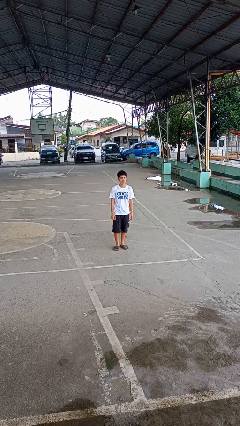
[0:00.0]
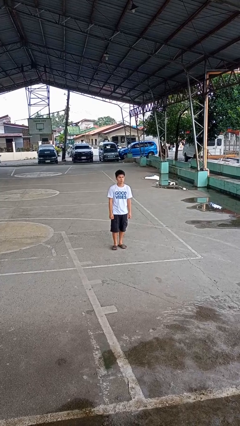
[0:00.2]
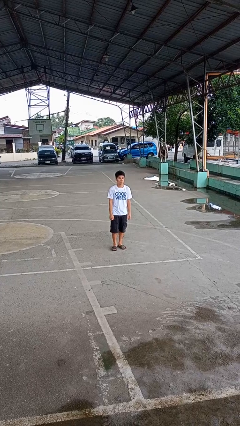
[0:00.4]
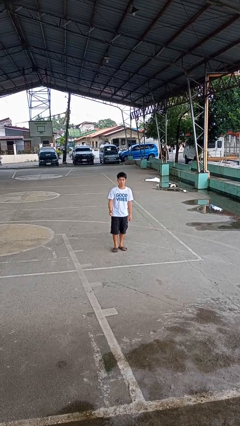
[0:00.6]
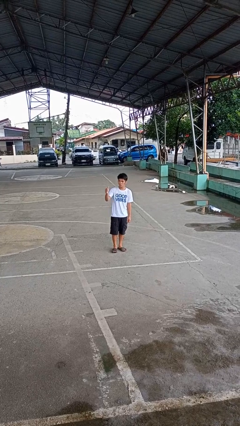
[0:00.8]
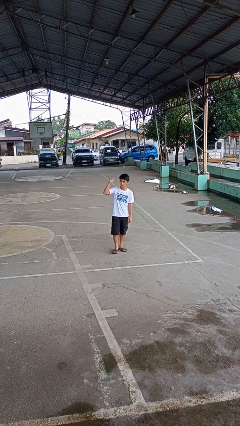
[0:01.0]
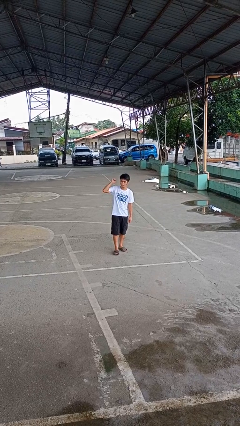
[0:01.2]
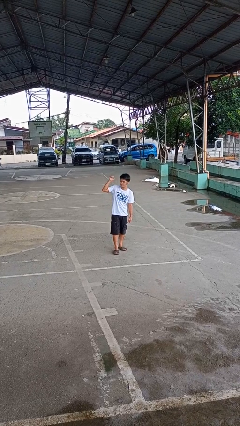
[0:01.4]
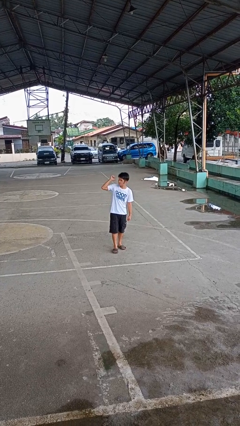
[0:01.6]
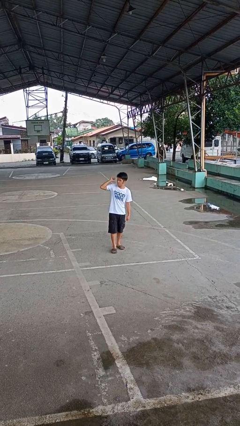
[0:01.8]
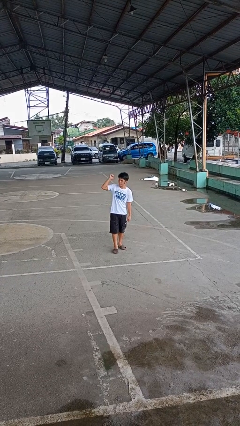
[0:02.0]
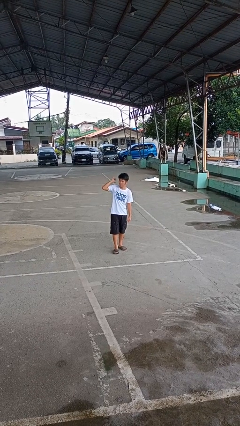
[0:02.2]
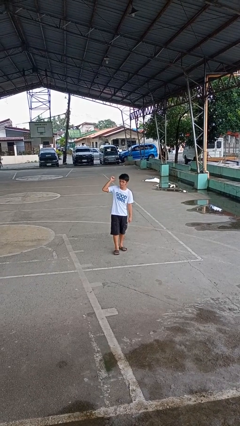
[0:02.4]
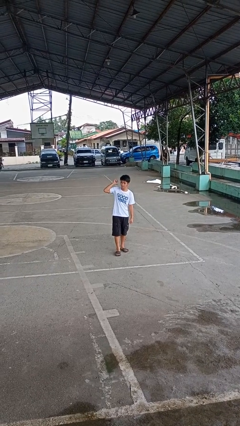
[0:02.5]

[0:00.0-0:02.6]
person gestures behind me

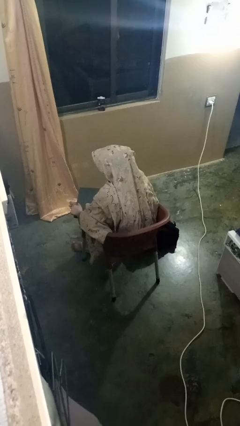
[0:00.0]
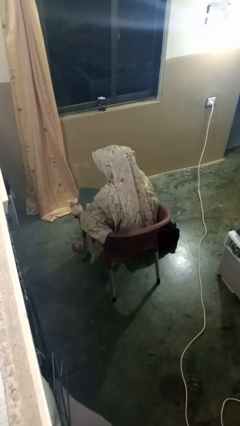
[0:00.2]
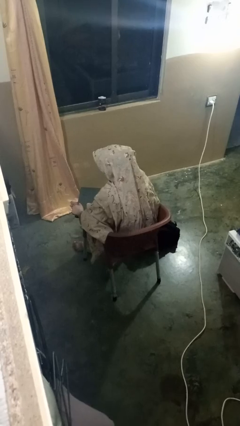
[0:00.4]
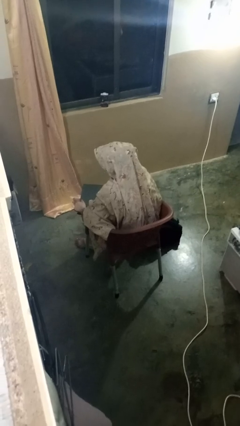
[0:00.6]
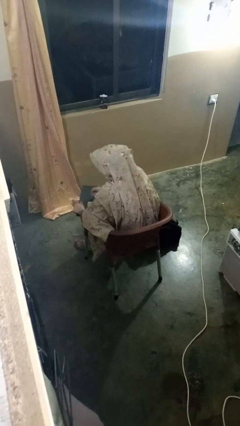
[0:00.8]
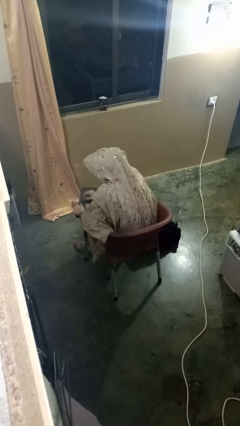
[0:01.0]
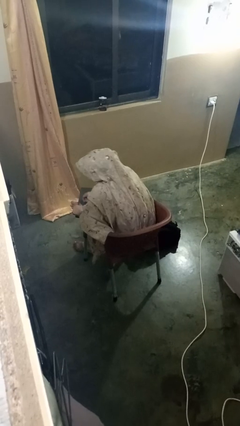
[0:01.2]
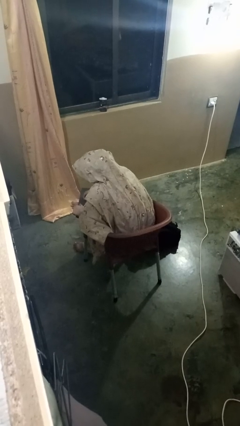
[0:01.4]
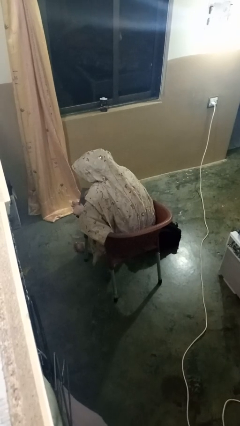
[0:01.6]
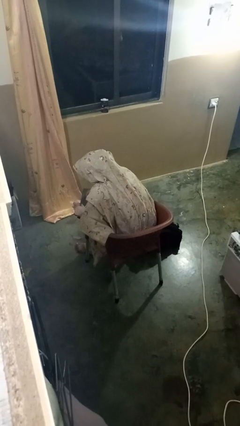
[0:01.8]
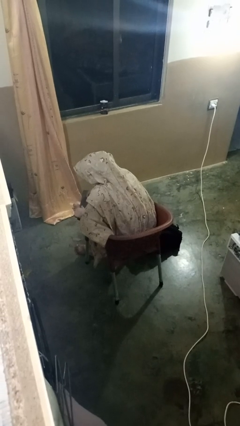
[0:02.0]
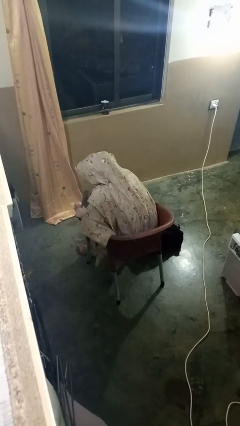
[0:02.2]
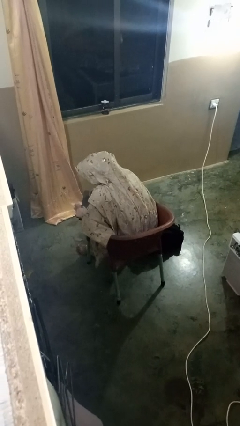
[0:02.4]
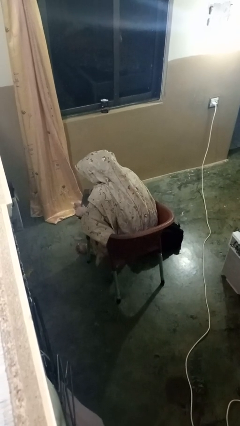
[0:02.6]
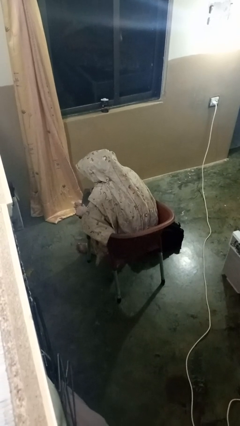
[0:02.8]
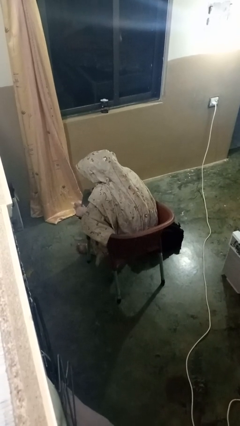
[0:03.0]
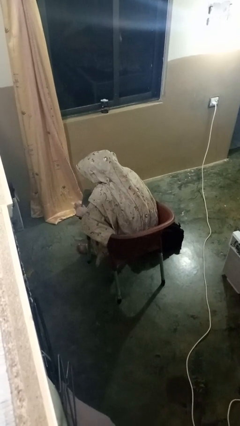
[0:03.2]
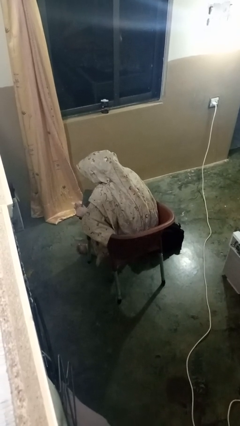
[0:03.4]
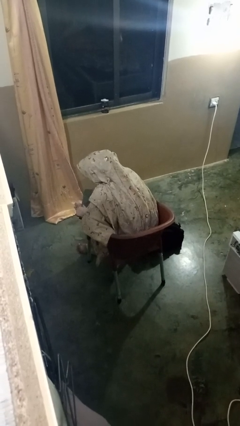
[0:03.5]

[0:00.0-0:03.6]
person interacts with tablet

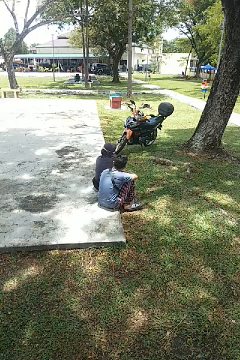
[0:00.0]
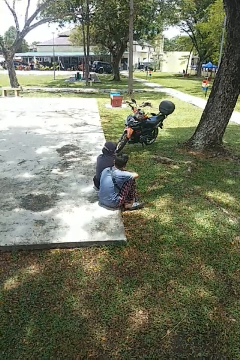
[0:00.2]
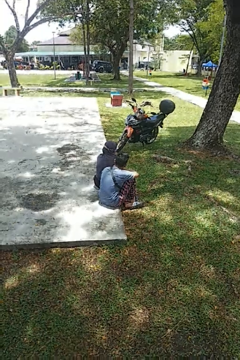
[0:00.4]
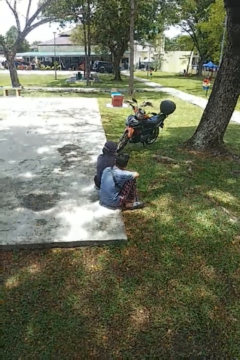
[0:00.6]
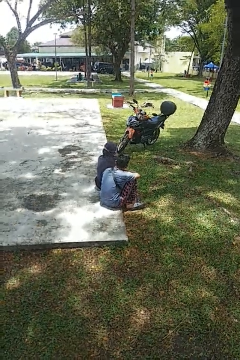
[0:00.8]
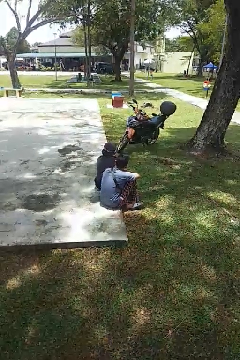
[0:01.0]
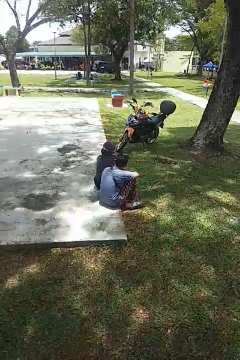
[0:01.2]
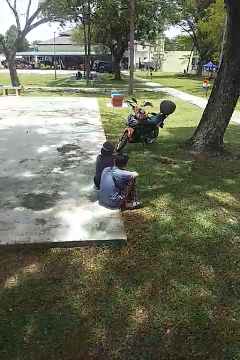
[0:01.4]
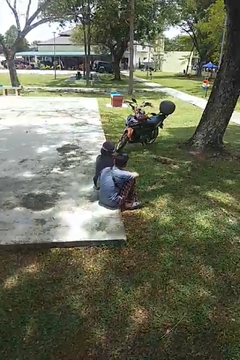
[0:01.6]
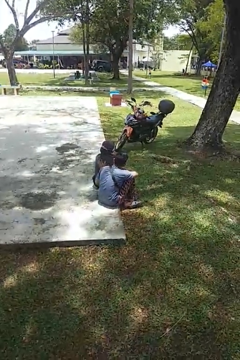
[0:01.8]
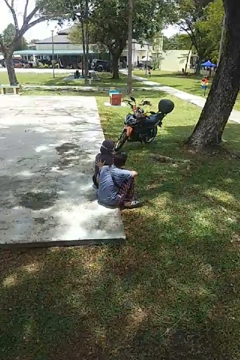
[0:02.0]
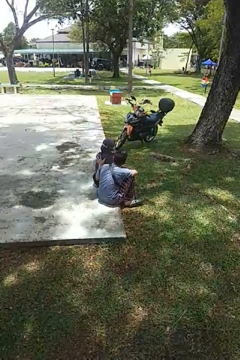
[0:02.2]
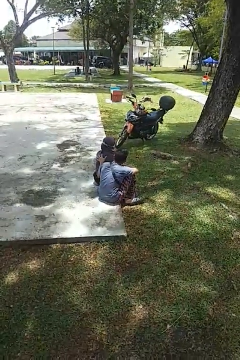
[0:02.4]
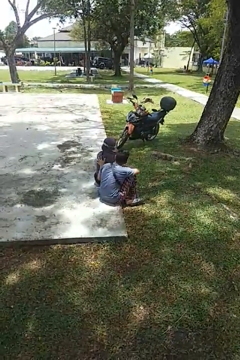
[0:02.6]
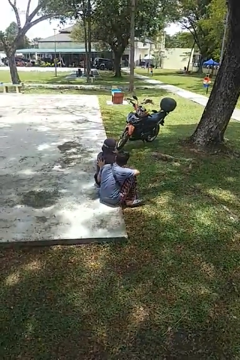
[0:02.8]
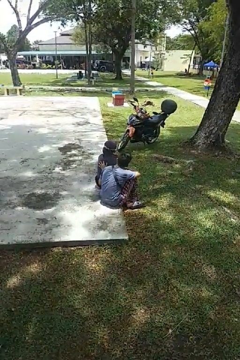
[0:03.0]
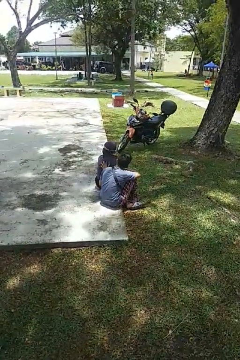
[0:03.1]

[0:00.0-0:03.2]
person touches back of person

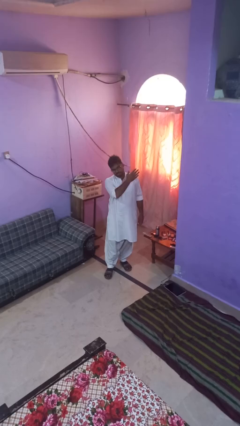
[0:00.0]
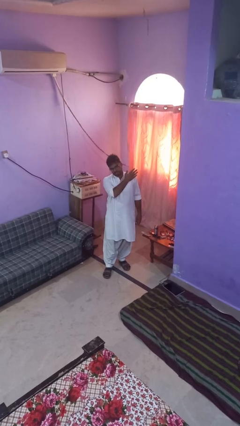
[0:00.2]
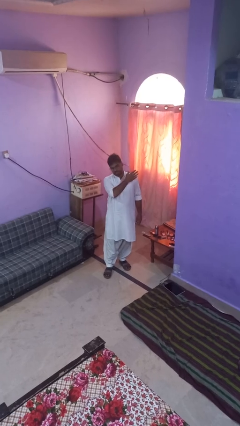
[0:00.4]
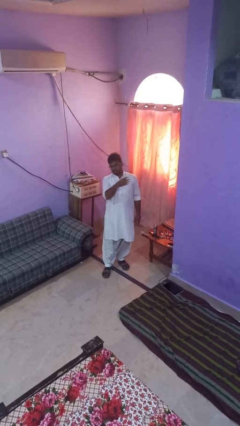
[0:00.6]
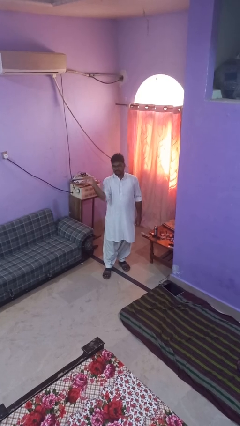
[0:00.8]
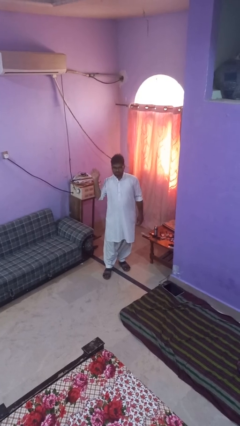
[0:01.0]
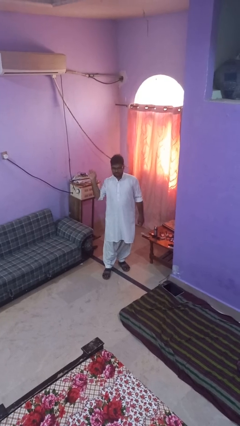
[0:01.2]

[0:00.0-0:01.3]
person gestures swipe right

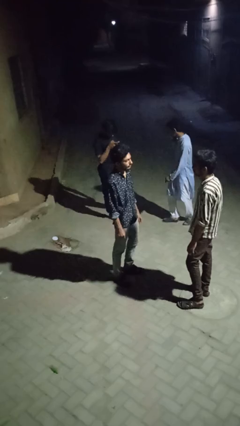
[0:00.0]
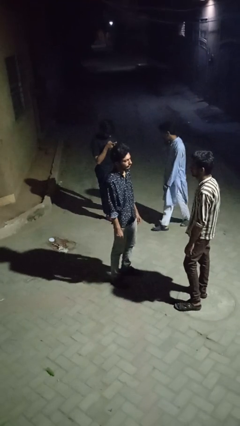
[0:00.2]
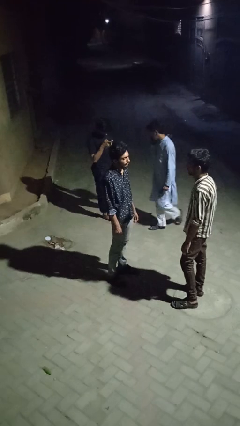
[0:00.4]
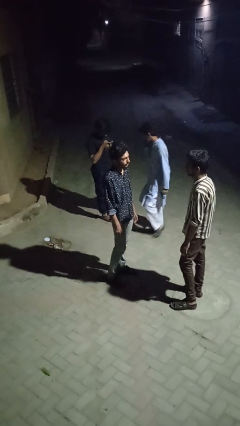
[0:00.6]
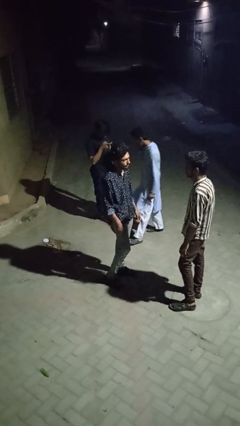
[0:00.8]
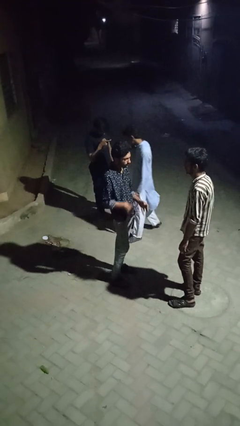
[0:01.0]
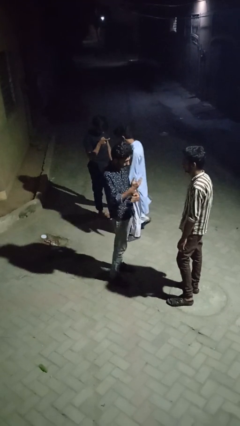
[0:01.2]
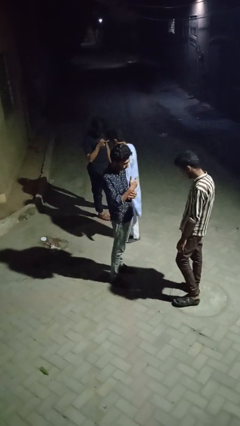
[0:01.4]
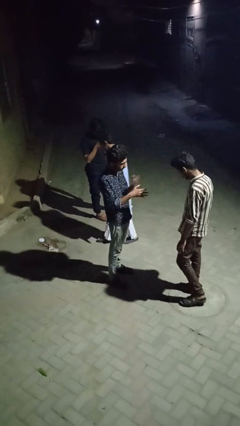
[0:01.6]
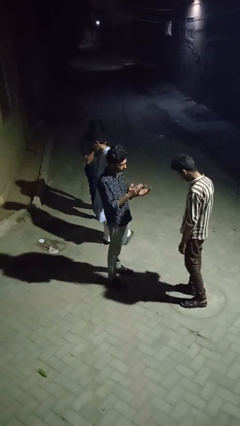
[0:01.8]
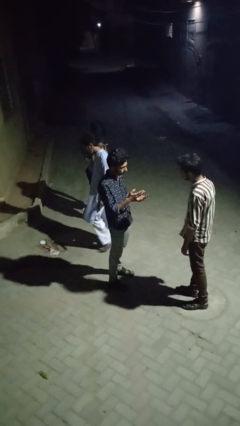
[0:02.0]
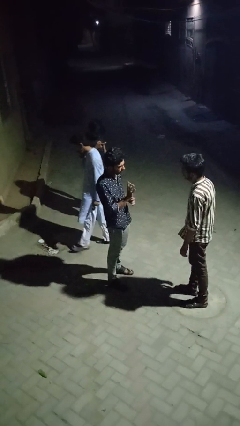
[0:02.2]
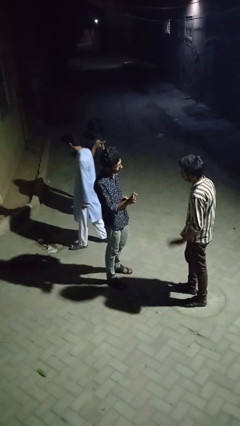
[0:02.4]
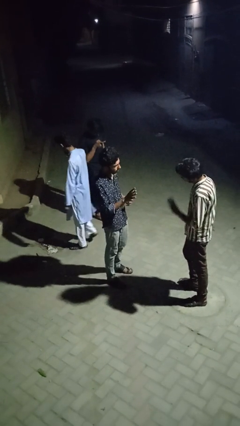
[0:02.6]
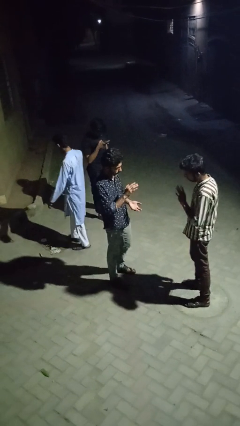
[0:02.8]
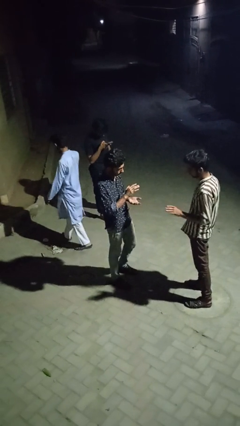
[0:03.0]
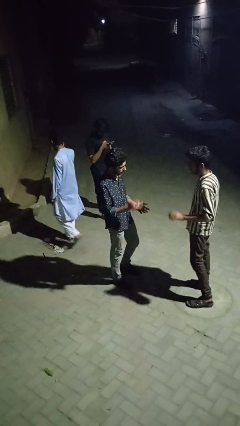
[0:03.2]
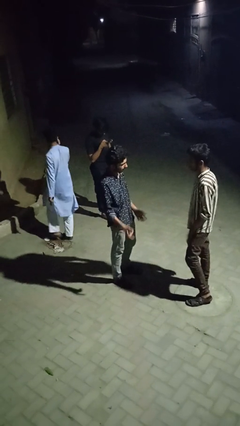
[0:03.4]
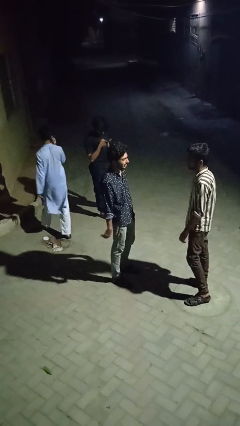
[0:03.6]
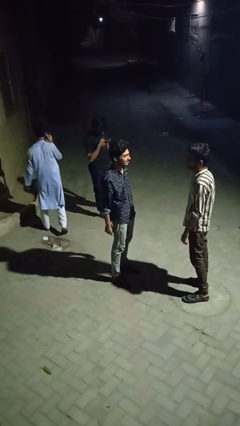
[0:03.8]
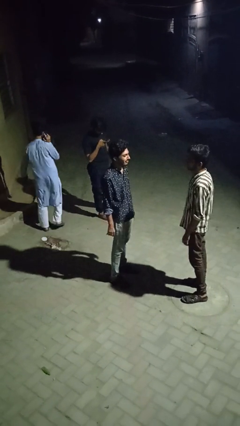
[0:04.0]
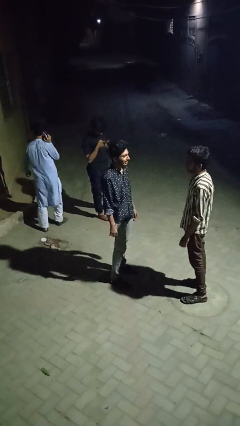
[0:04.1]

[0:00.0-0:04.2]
person talks to person

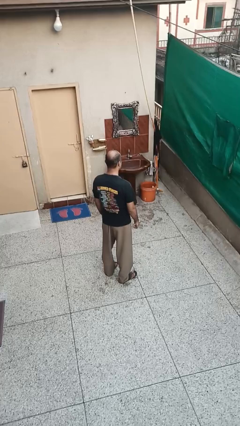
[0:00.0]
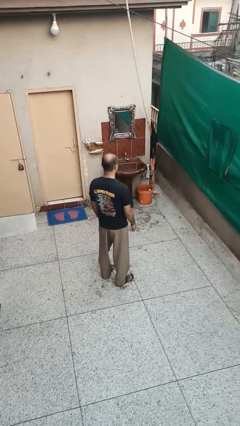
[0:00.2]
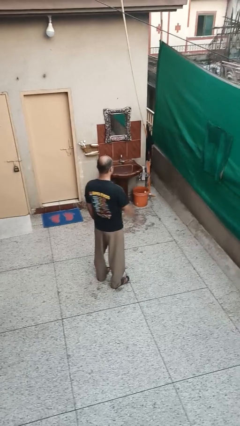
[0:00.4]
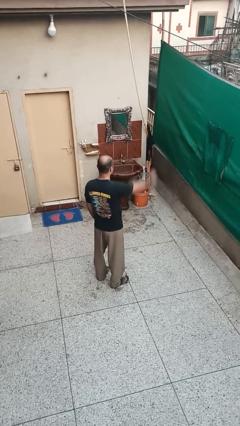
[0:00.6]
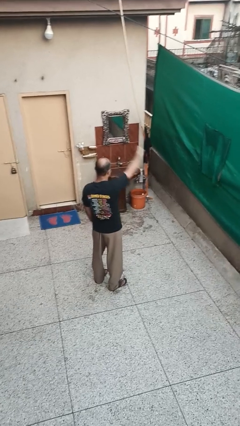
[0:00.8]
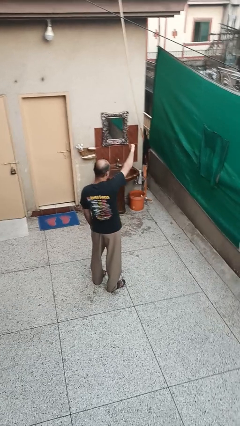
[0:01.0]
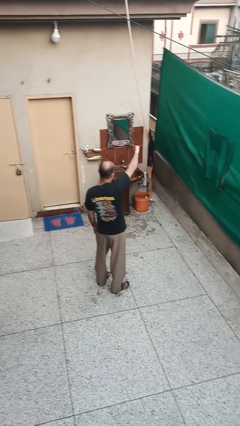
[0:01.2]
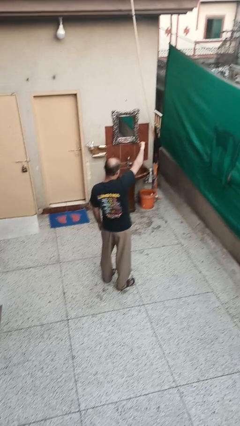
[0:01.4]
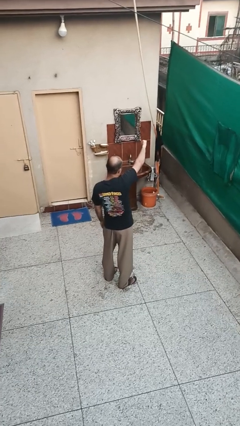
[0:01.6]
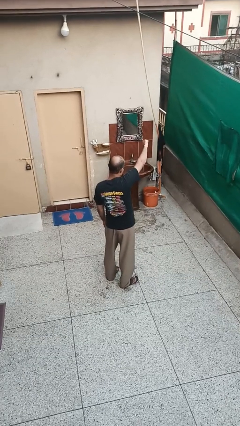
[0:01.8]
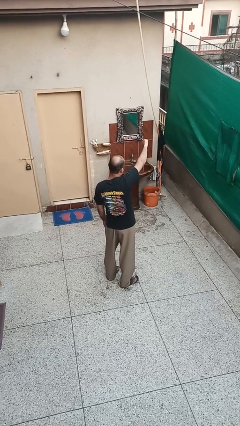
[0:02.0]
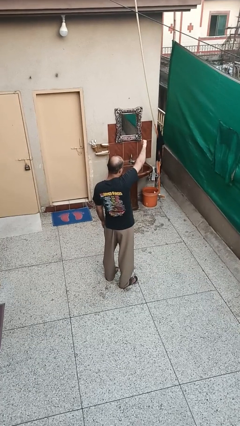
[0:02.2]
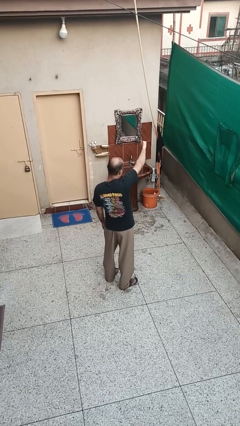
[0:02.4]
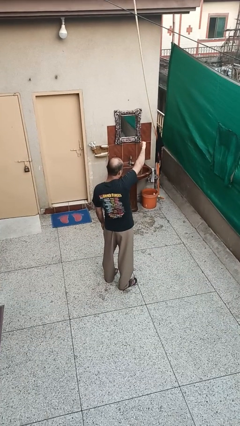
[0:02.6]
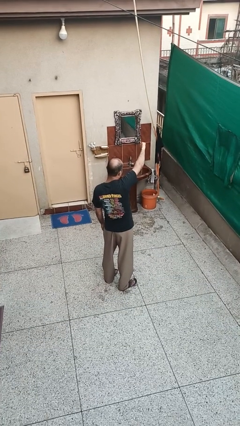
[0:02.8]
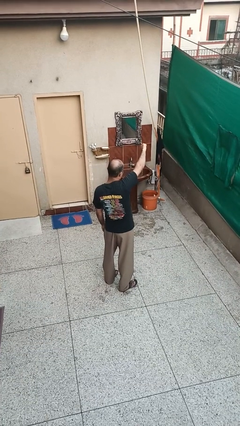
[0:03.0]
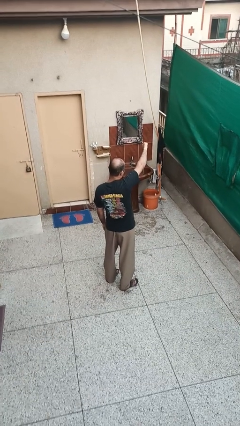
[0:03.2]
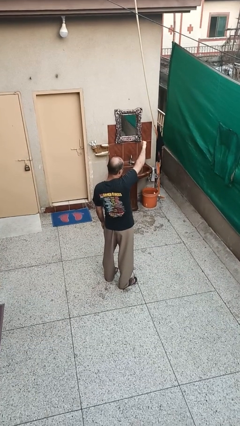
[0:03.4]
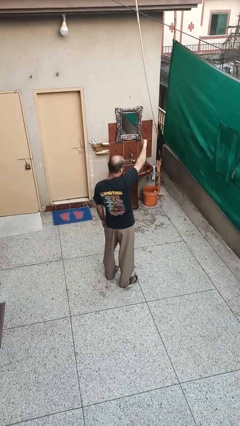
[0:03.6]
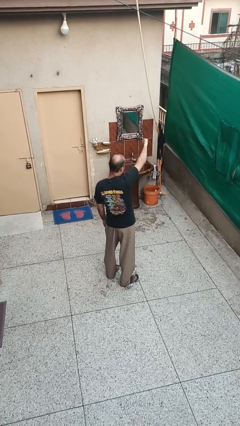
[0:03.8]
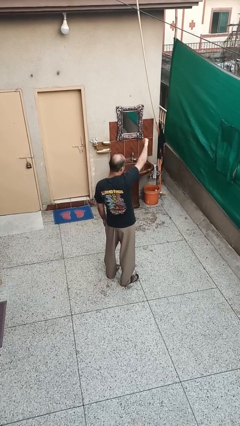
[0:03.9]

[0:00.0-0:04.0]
person gestures thumbs down
